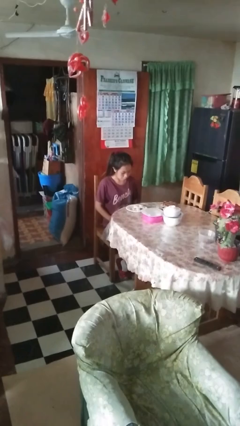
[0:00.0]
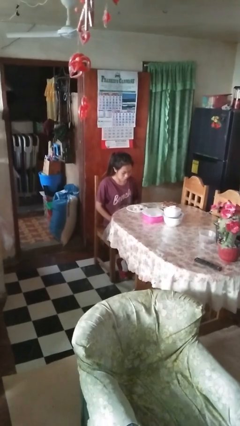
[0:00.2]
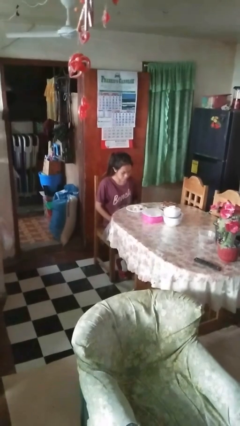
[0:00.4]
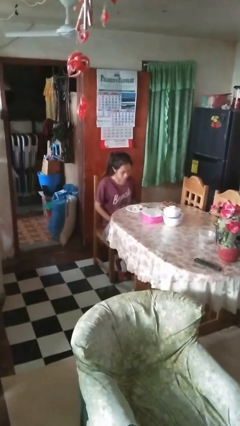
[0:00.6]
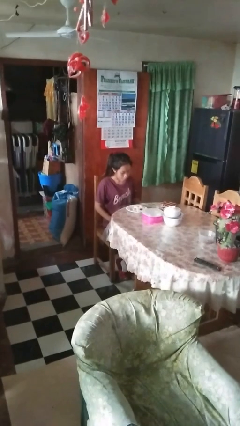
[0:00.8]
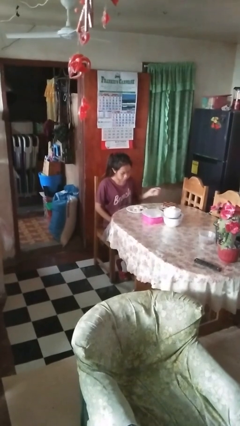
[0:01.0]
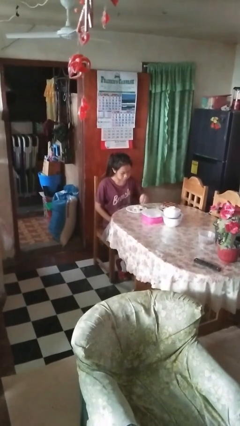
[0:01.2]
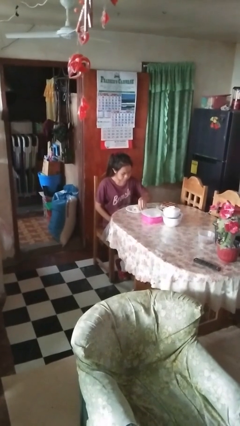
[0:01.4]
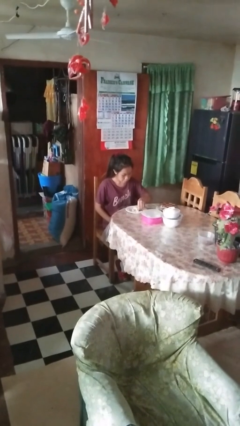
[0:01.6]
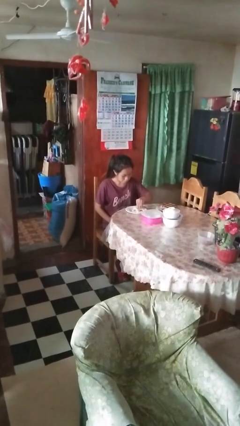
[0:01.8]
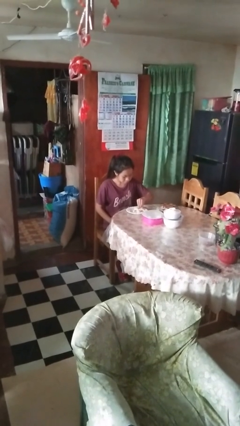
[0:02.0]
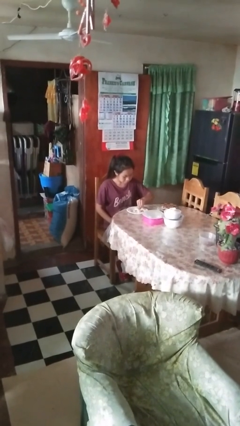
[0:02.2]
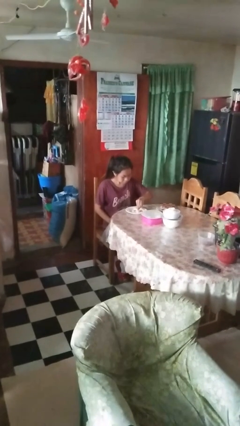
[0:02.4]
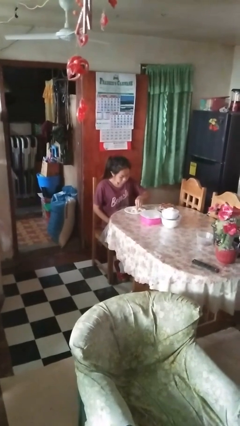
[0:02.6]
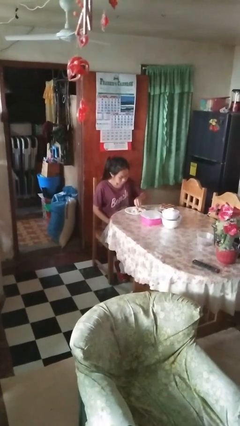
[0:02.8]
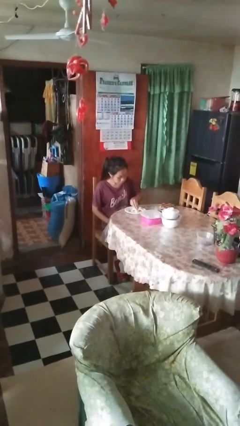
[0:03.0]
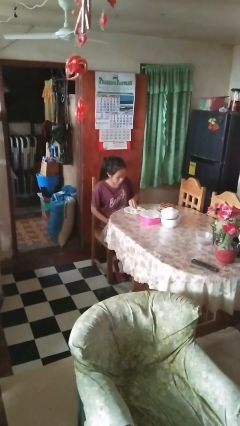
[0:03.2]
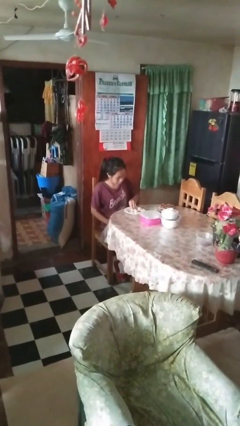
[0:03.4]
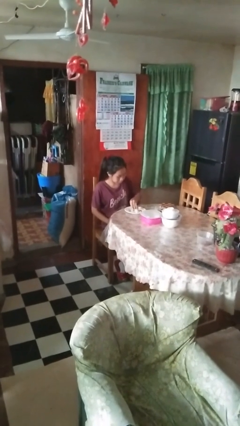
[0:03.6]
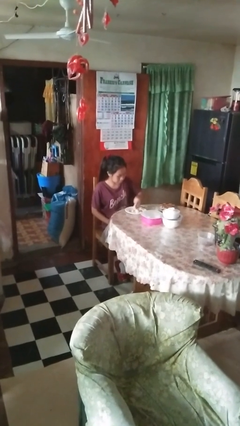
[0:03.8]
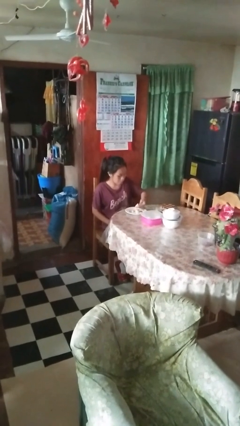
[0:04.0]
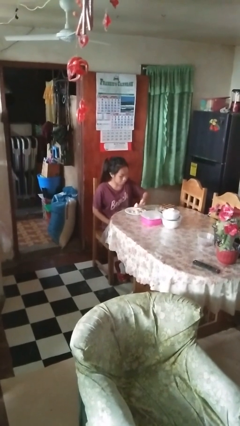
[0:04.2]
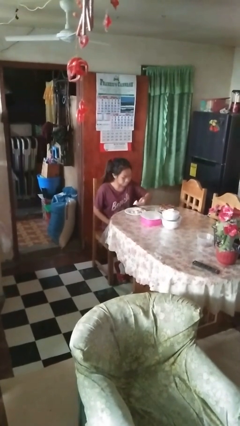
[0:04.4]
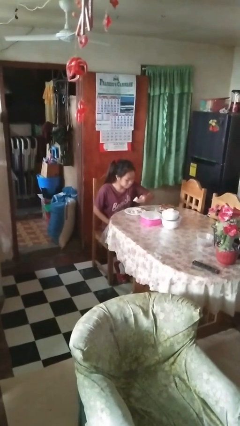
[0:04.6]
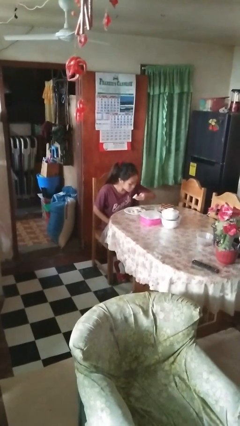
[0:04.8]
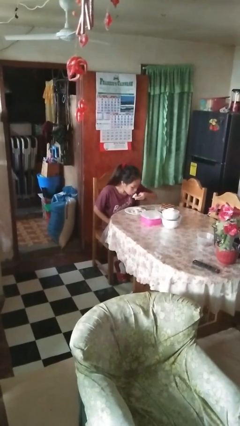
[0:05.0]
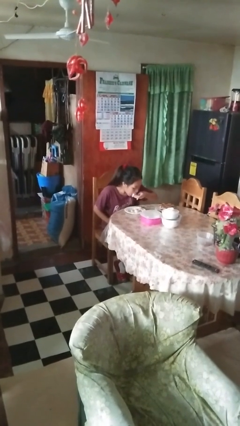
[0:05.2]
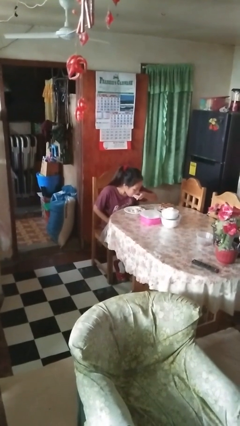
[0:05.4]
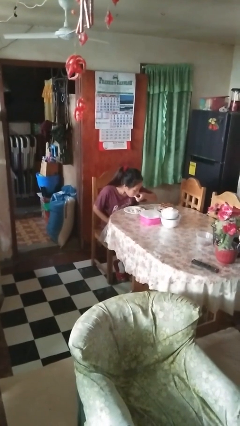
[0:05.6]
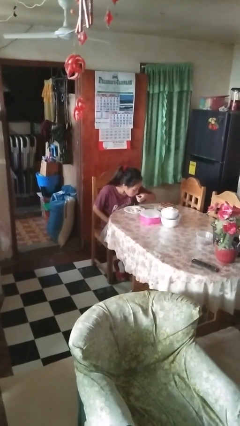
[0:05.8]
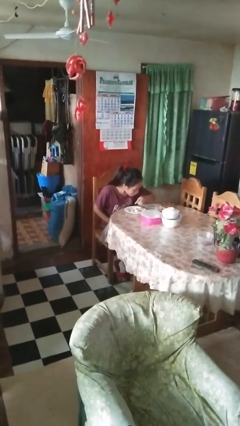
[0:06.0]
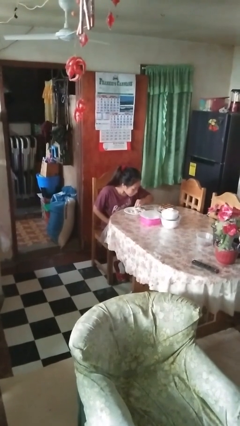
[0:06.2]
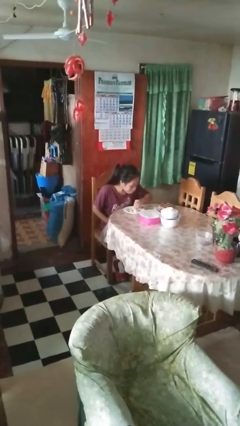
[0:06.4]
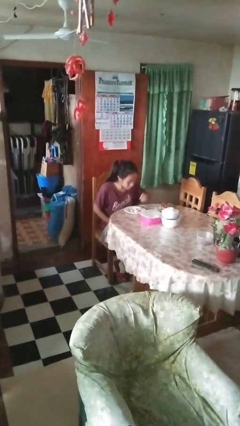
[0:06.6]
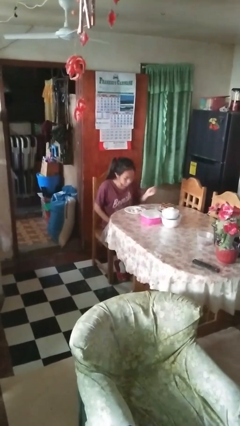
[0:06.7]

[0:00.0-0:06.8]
person eats with hands

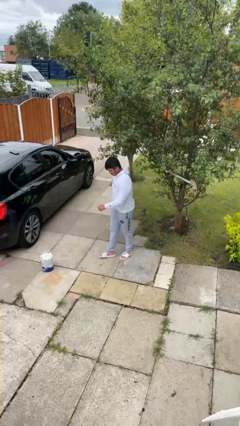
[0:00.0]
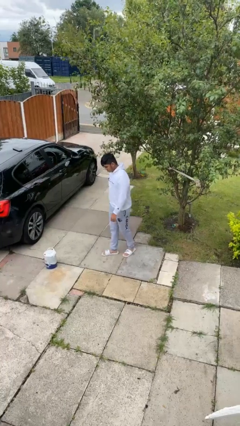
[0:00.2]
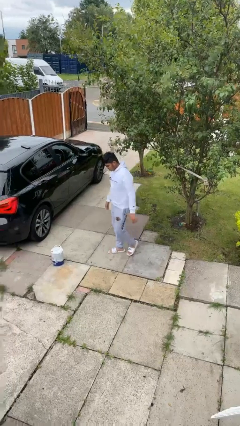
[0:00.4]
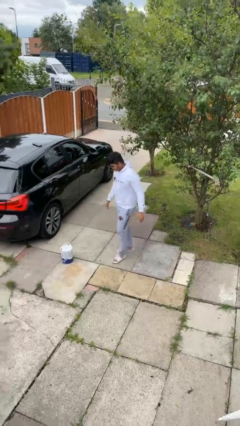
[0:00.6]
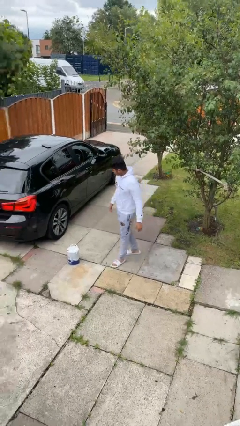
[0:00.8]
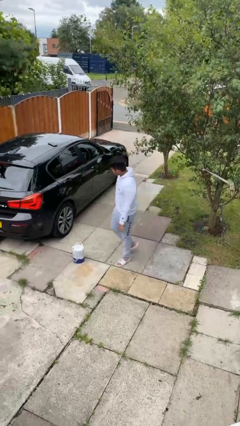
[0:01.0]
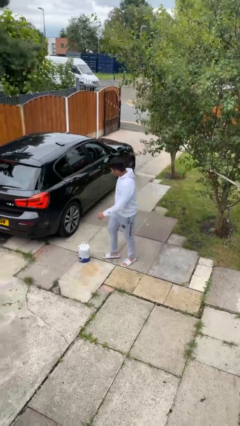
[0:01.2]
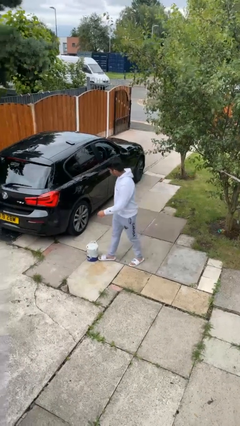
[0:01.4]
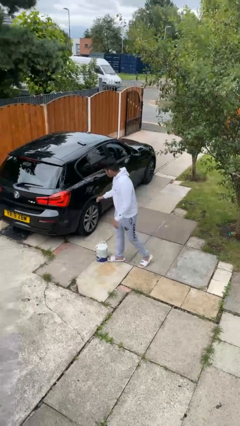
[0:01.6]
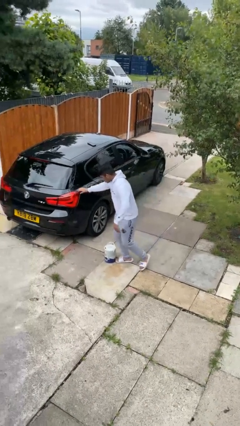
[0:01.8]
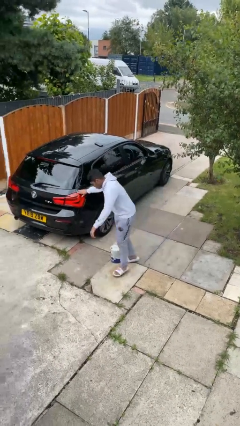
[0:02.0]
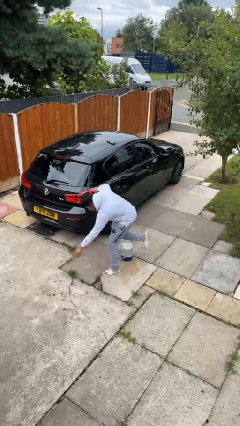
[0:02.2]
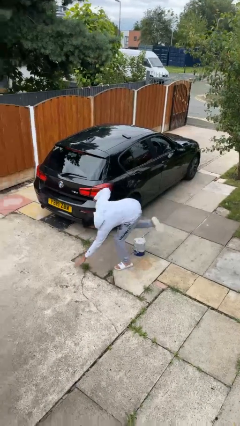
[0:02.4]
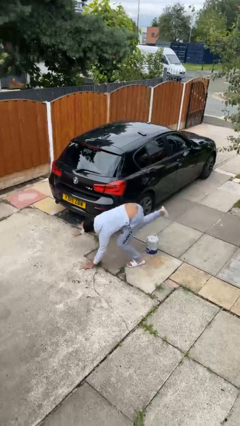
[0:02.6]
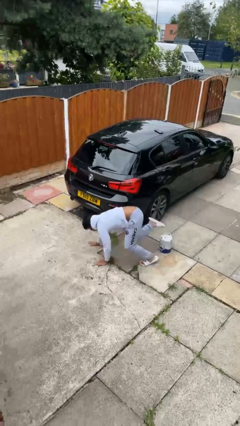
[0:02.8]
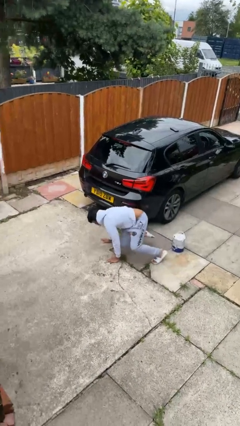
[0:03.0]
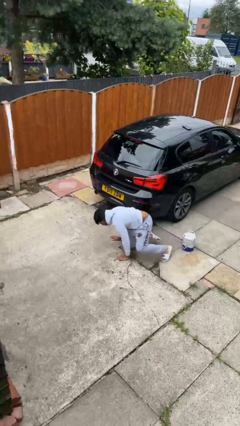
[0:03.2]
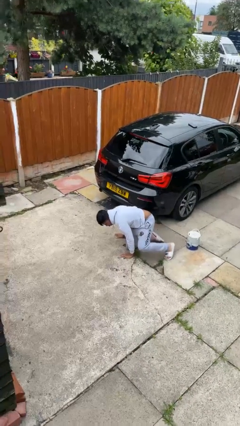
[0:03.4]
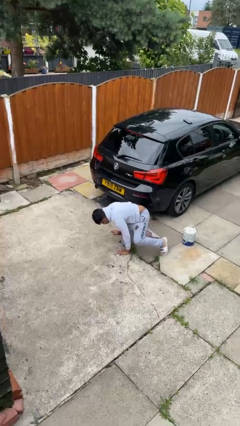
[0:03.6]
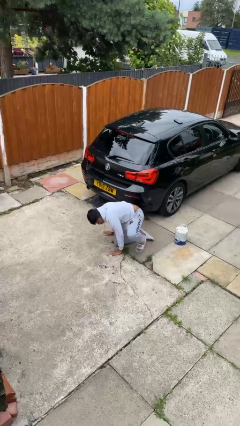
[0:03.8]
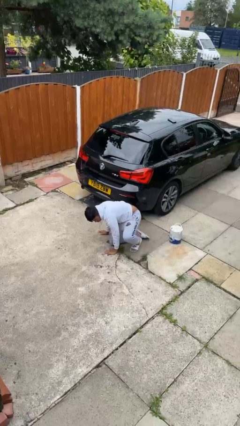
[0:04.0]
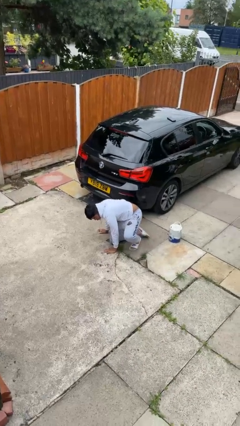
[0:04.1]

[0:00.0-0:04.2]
person trips on object on floor

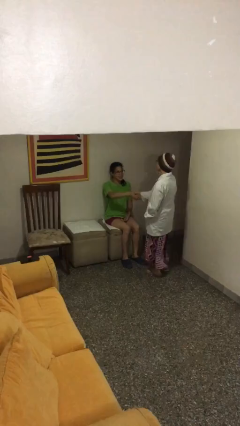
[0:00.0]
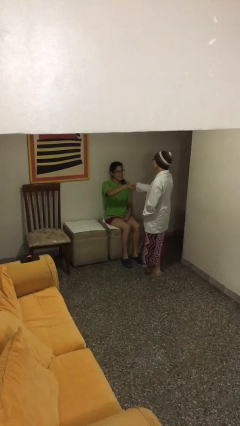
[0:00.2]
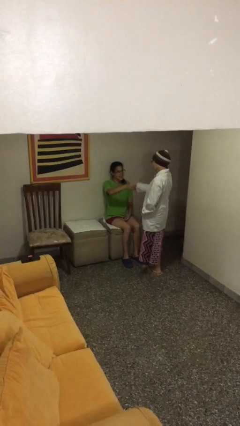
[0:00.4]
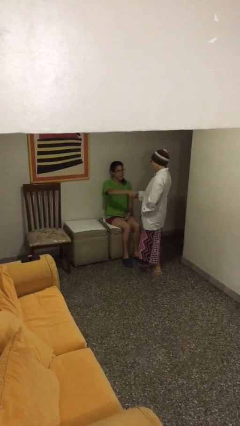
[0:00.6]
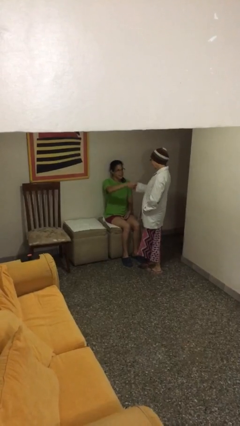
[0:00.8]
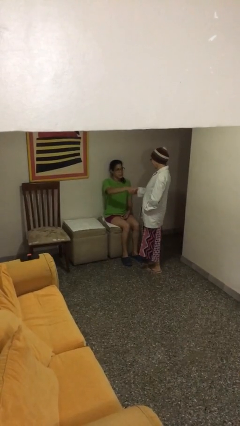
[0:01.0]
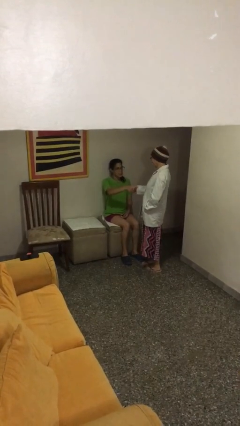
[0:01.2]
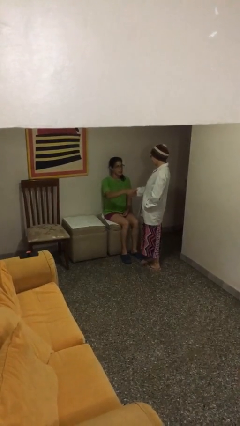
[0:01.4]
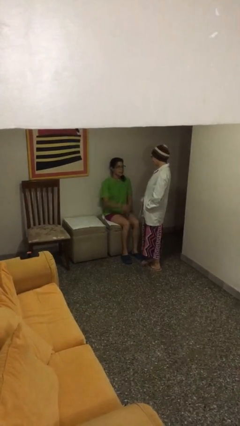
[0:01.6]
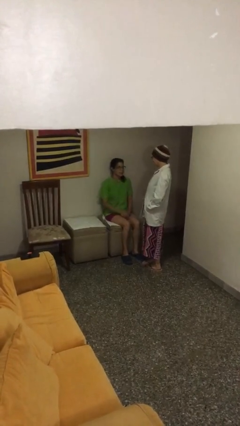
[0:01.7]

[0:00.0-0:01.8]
person shakes hand

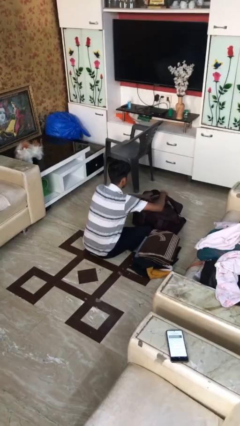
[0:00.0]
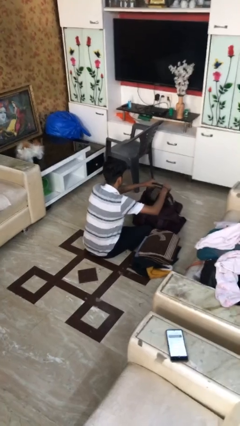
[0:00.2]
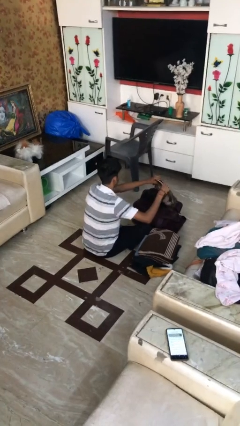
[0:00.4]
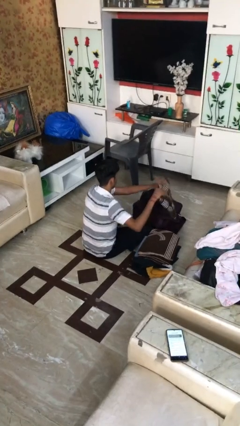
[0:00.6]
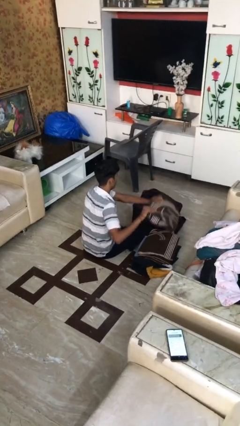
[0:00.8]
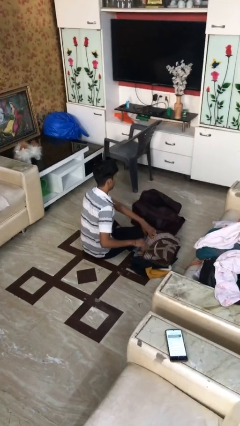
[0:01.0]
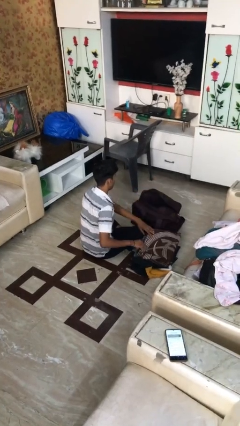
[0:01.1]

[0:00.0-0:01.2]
person unloads clothes from suitcase

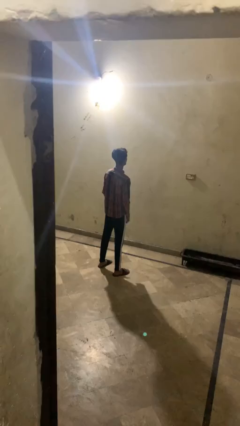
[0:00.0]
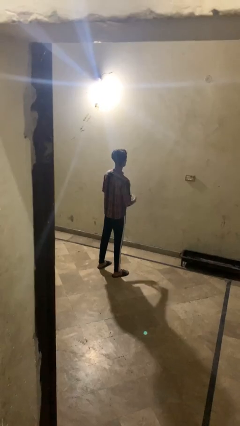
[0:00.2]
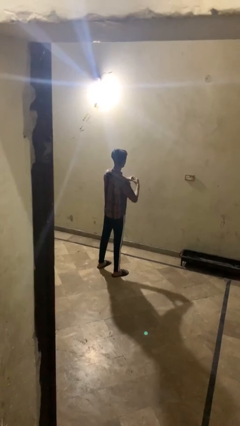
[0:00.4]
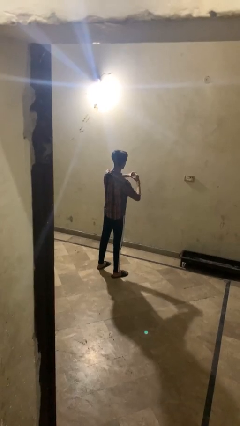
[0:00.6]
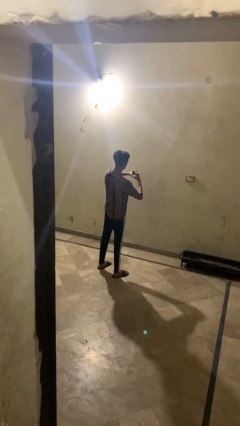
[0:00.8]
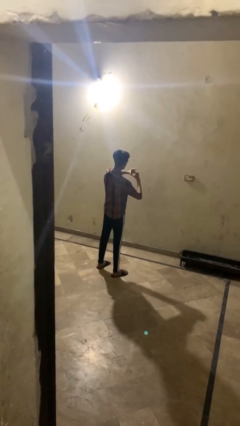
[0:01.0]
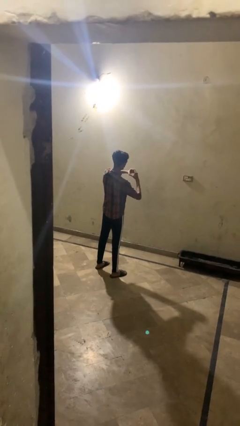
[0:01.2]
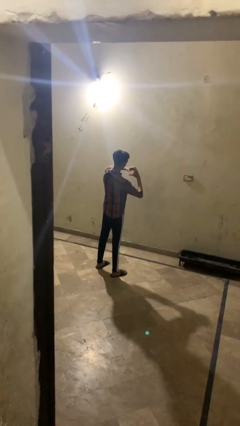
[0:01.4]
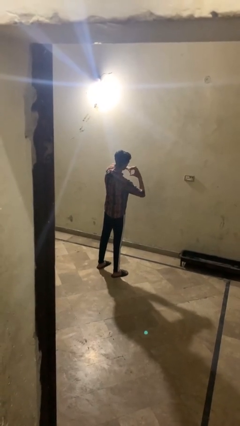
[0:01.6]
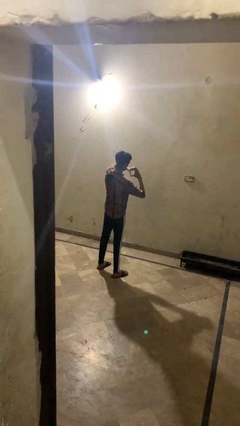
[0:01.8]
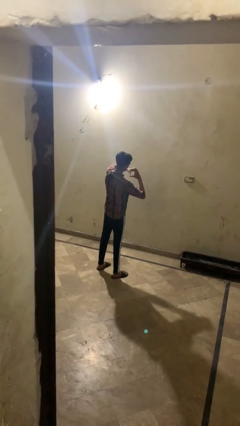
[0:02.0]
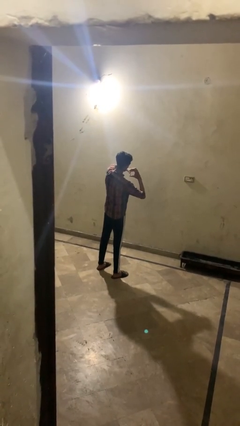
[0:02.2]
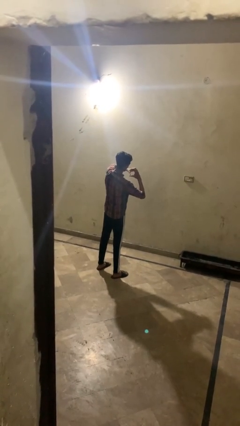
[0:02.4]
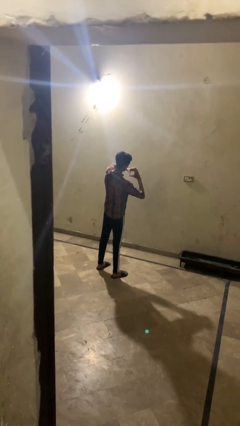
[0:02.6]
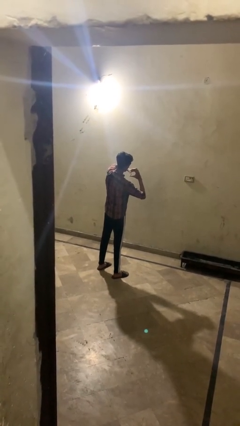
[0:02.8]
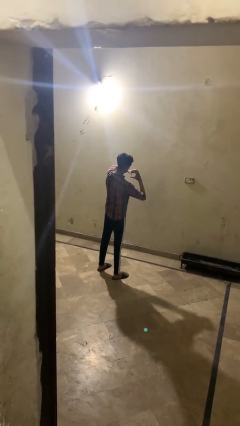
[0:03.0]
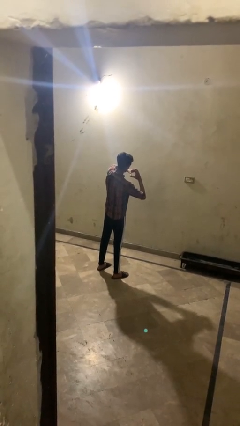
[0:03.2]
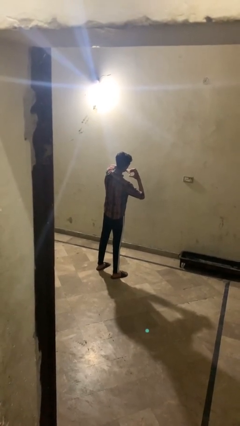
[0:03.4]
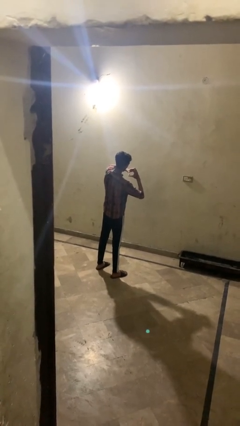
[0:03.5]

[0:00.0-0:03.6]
person gestures heart
